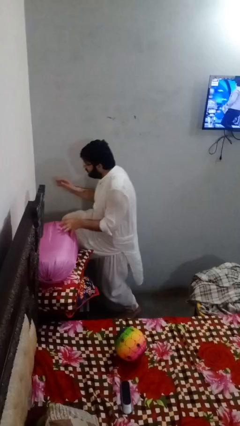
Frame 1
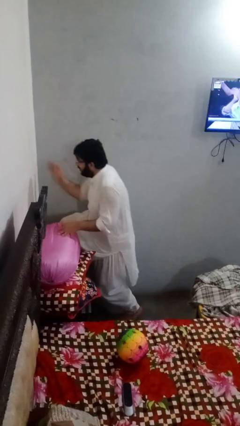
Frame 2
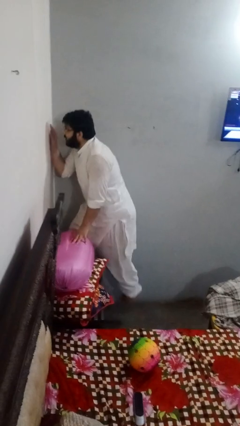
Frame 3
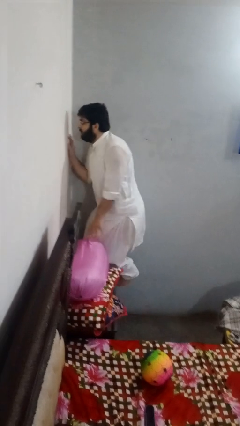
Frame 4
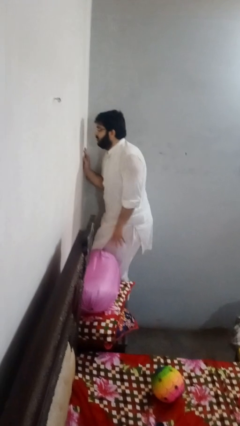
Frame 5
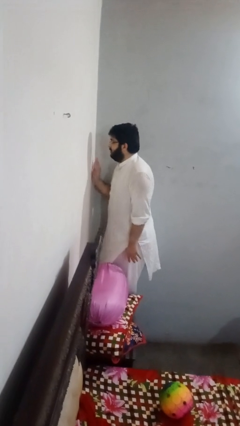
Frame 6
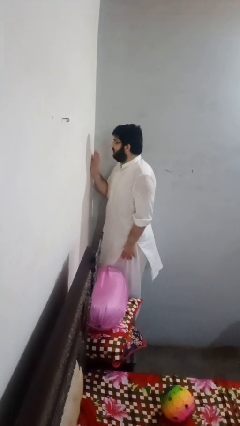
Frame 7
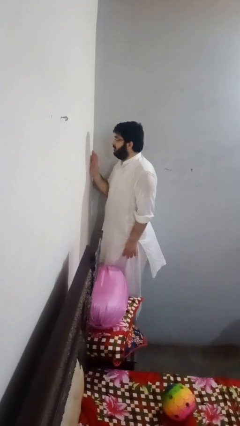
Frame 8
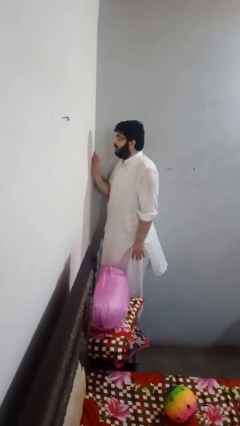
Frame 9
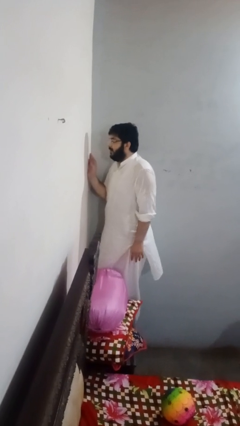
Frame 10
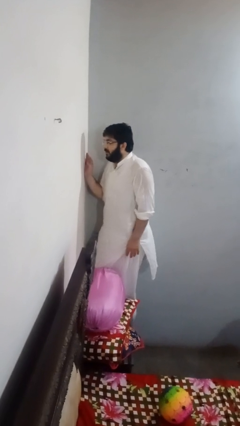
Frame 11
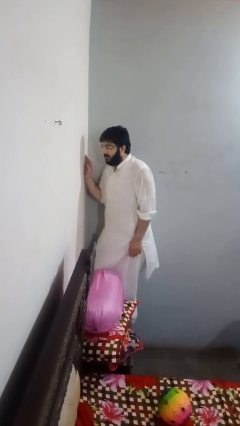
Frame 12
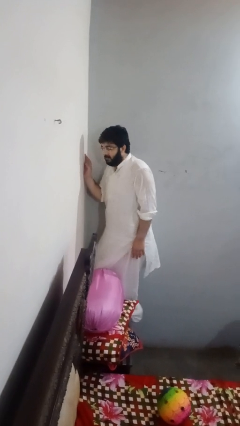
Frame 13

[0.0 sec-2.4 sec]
person climbs on table

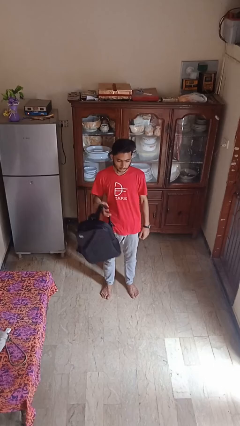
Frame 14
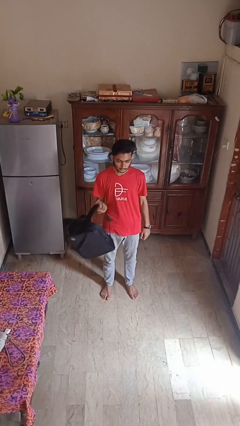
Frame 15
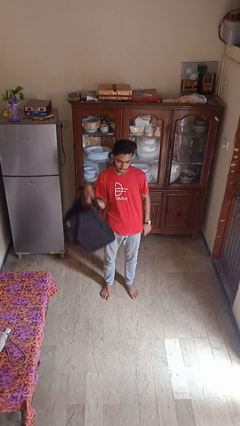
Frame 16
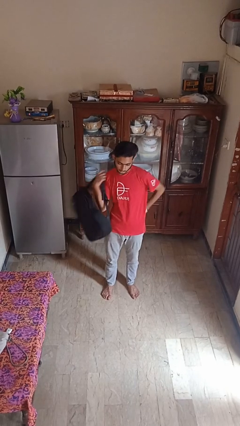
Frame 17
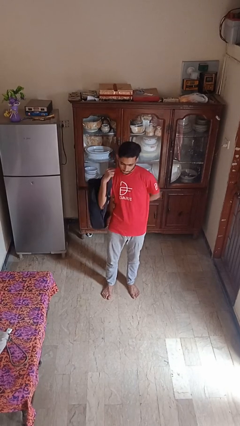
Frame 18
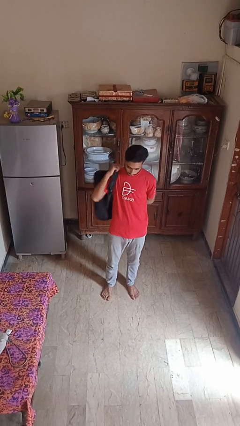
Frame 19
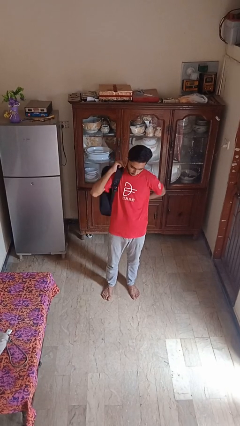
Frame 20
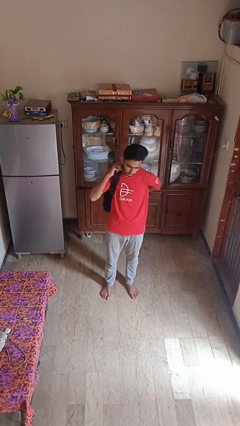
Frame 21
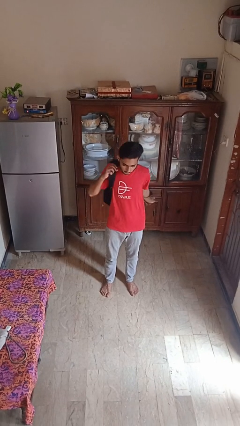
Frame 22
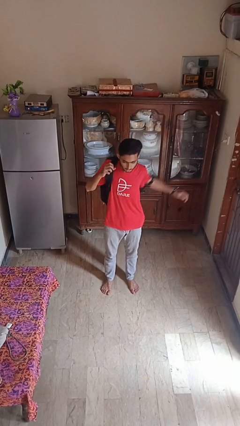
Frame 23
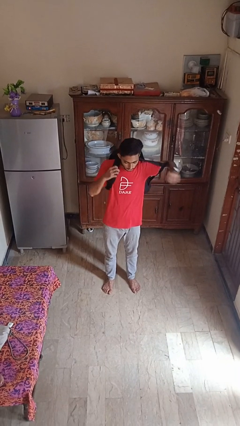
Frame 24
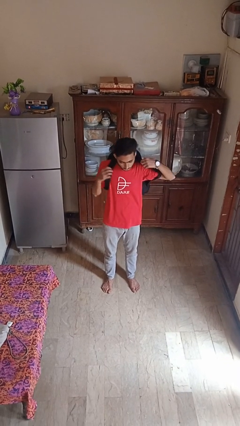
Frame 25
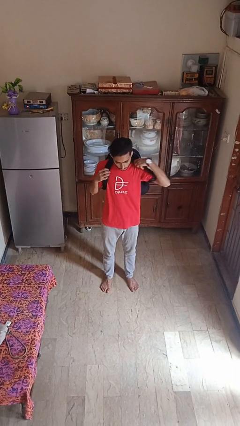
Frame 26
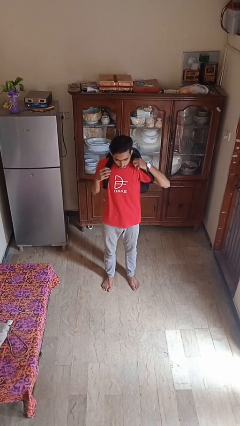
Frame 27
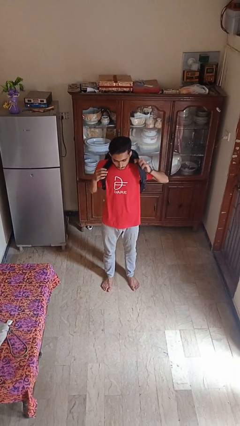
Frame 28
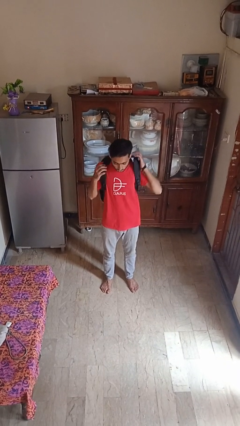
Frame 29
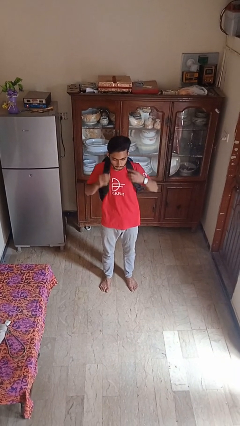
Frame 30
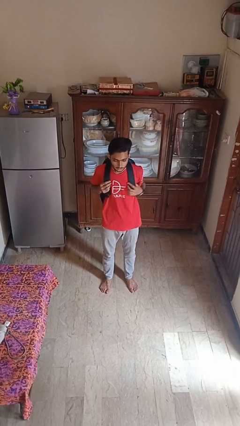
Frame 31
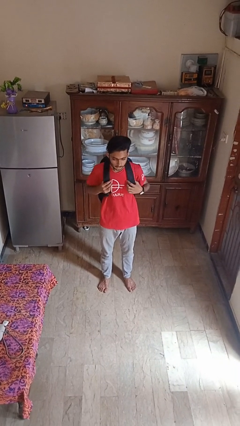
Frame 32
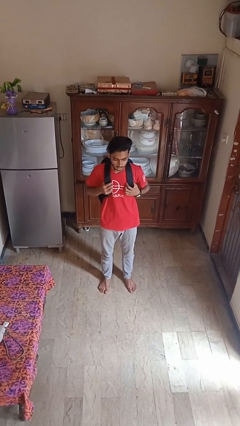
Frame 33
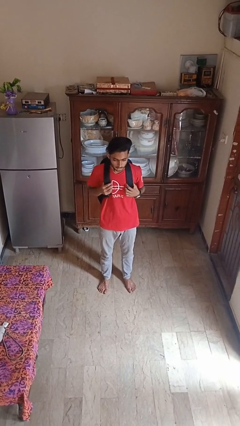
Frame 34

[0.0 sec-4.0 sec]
person puts on backpack

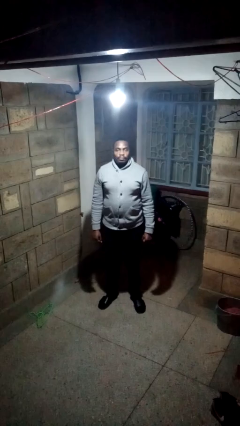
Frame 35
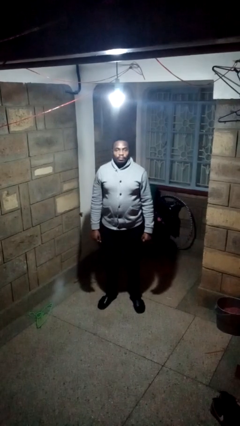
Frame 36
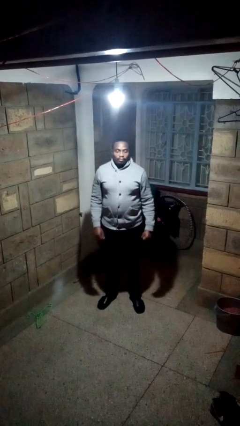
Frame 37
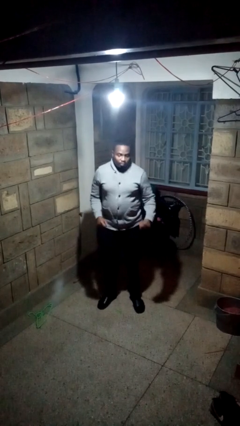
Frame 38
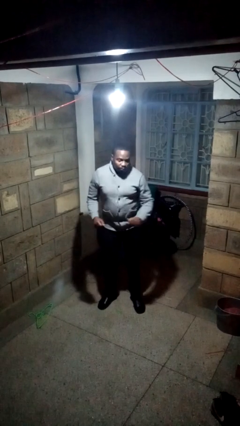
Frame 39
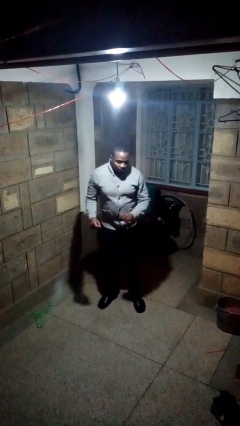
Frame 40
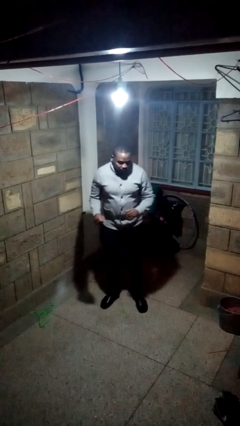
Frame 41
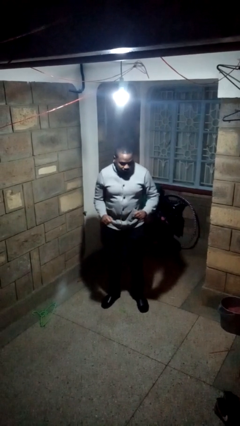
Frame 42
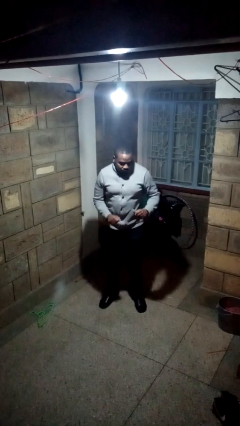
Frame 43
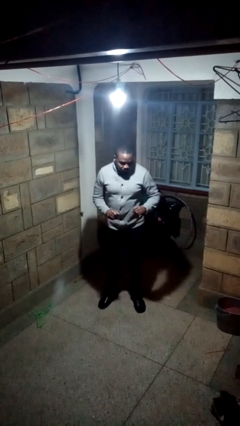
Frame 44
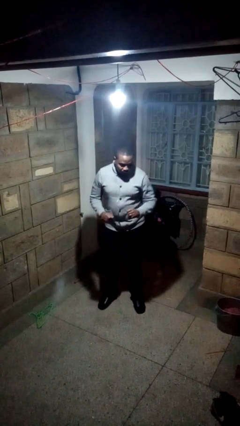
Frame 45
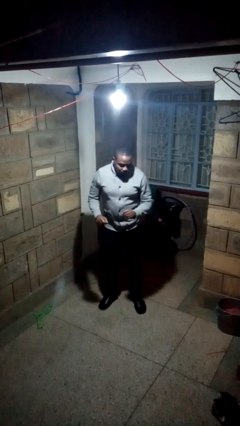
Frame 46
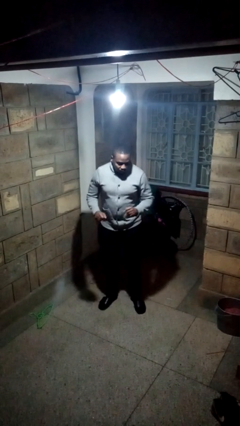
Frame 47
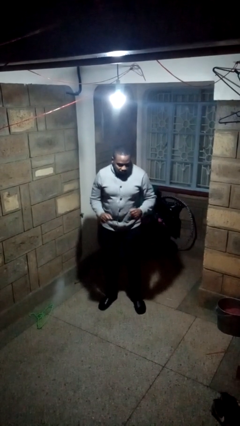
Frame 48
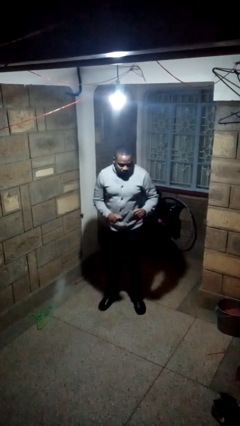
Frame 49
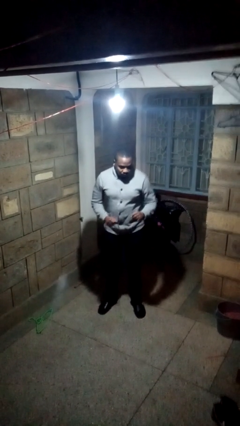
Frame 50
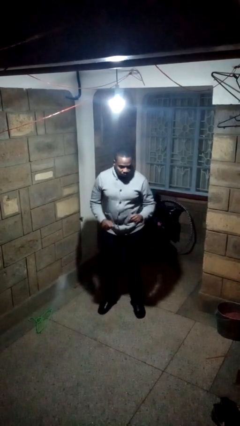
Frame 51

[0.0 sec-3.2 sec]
person dances in place

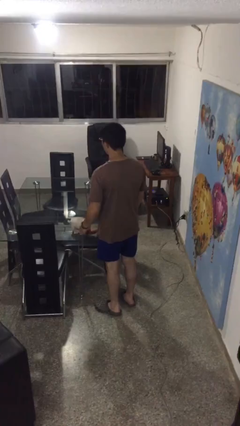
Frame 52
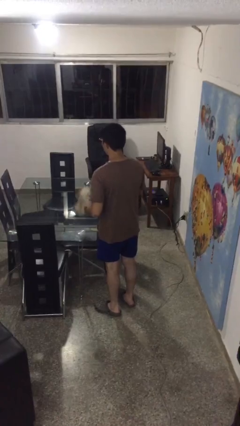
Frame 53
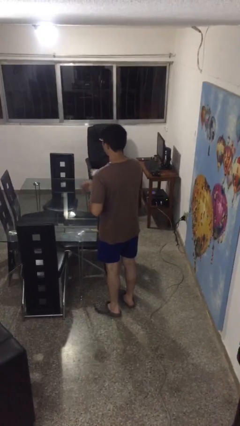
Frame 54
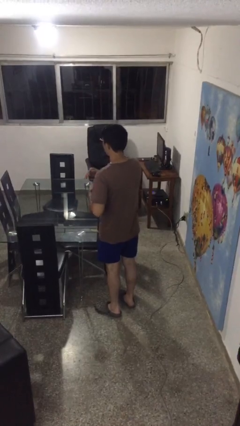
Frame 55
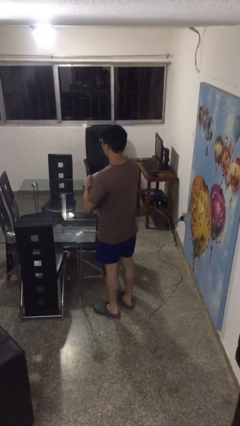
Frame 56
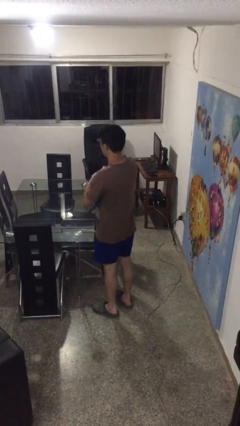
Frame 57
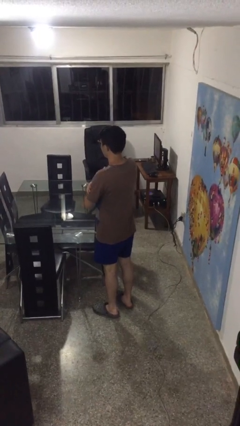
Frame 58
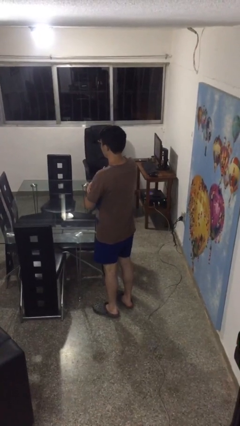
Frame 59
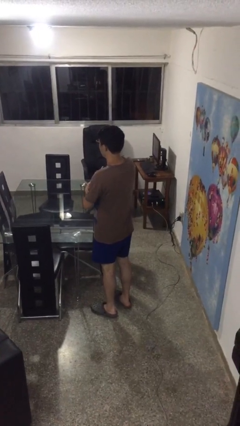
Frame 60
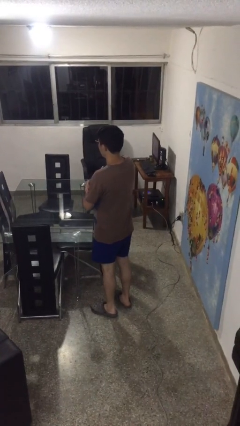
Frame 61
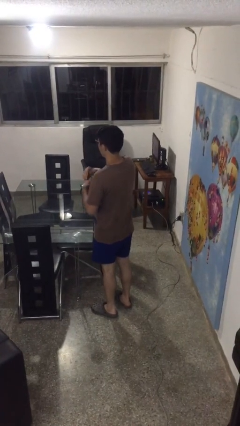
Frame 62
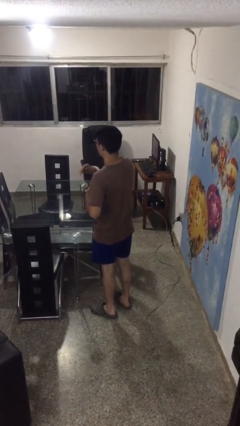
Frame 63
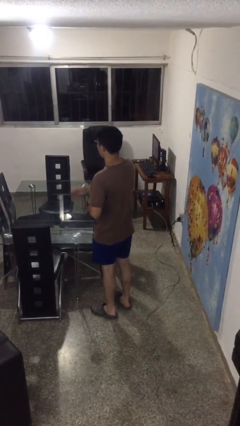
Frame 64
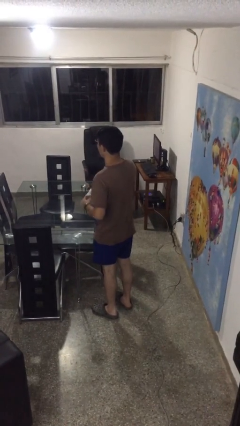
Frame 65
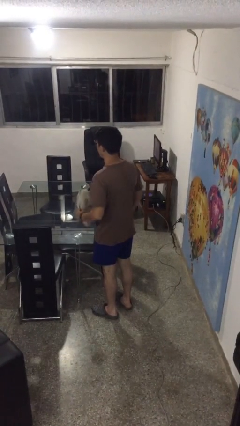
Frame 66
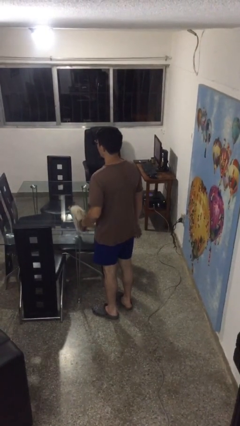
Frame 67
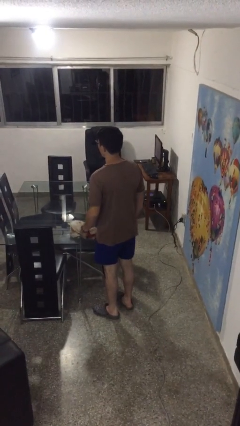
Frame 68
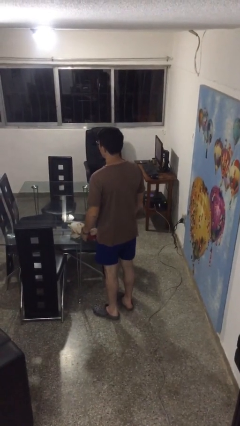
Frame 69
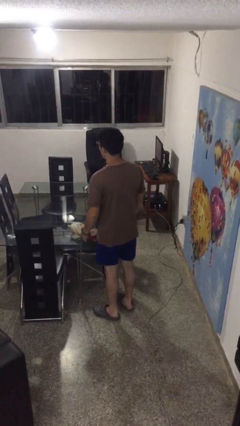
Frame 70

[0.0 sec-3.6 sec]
person hugs stuffed animal

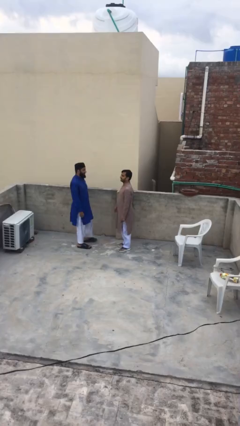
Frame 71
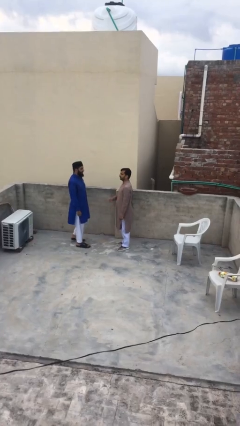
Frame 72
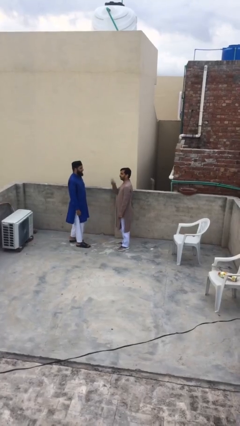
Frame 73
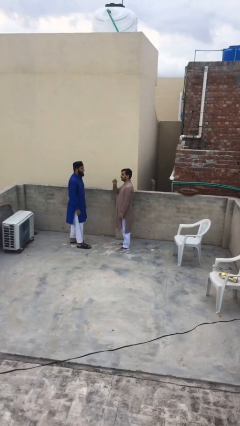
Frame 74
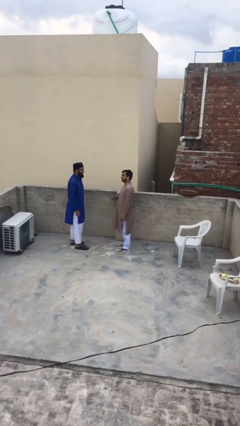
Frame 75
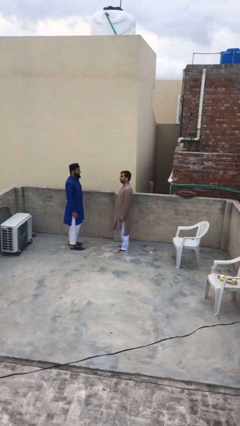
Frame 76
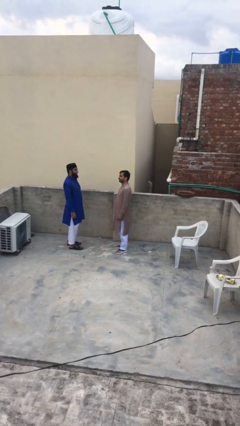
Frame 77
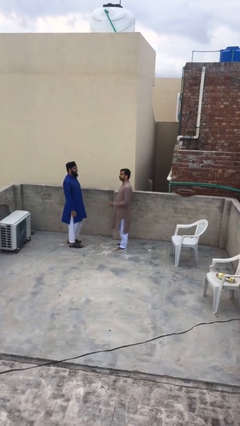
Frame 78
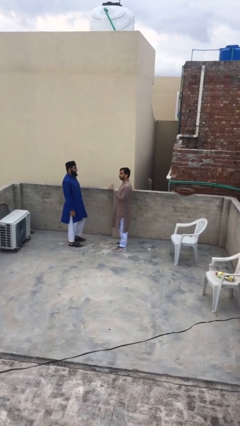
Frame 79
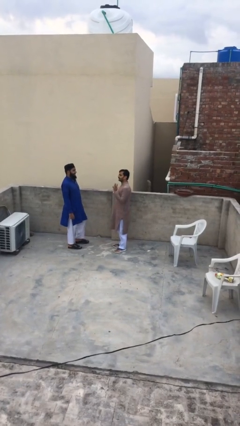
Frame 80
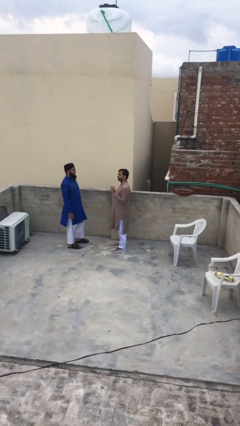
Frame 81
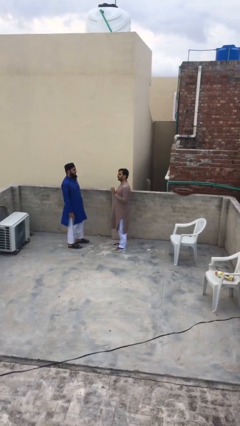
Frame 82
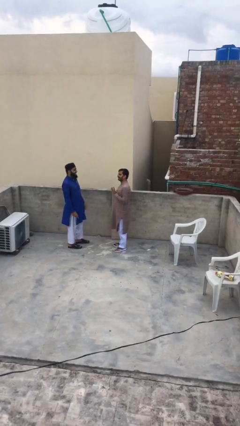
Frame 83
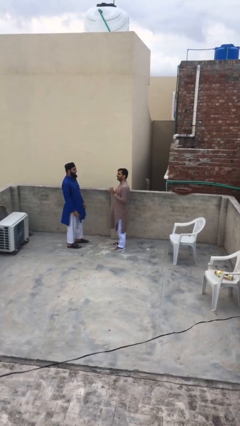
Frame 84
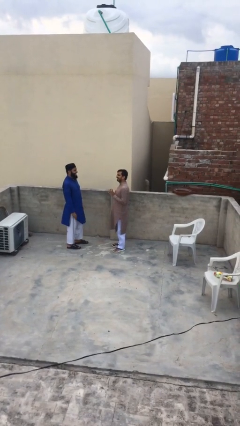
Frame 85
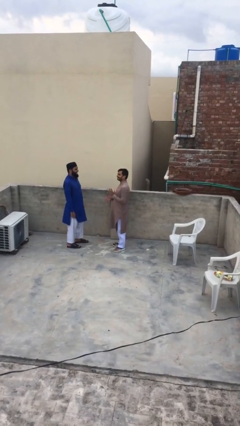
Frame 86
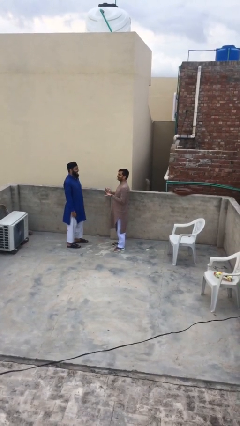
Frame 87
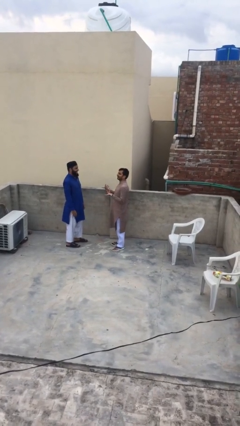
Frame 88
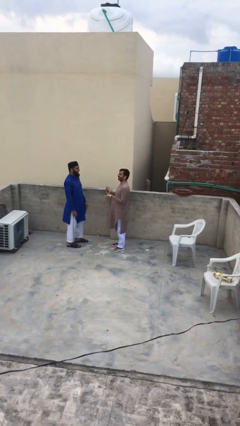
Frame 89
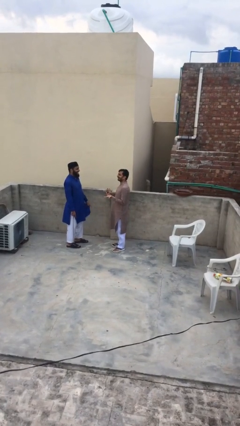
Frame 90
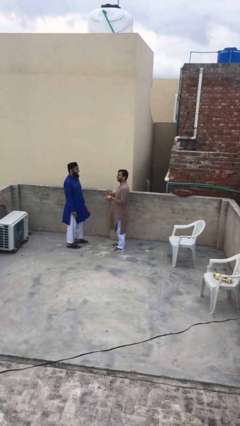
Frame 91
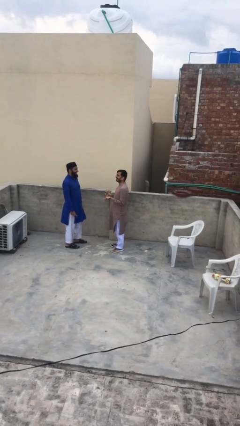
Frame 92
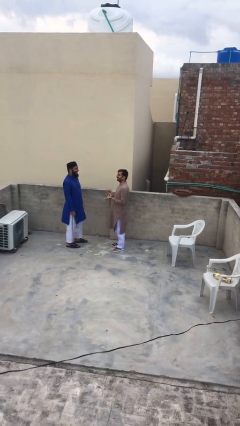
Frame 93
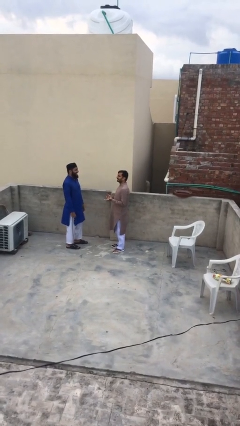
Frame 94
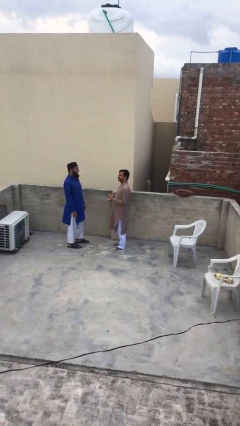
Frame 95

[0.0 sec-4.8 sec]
person talks to person
